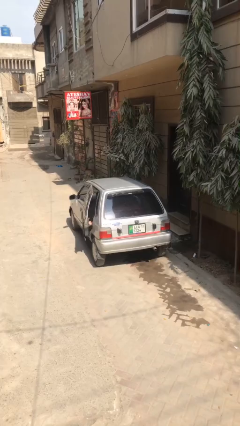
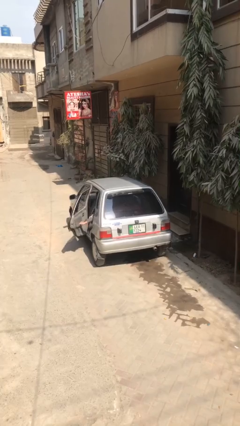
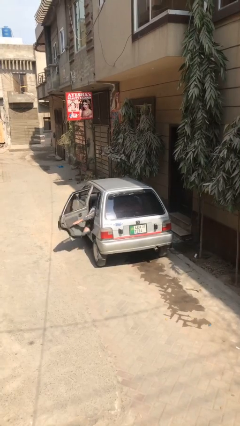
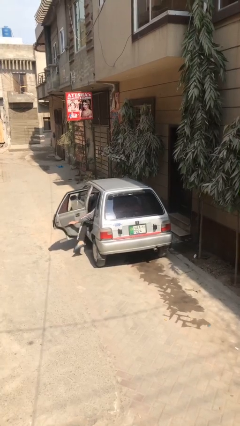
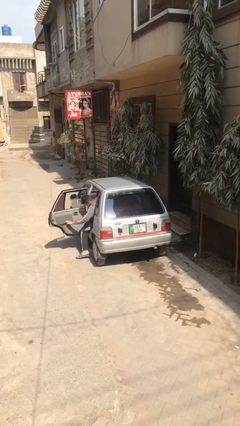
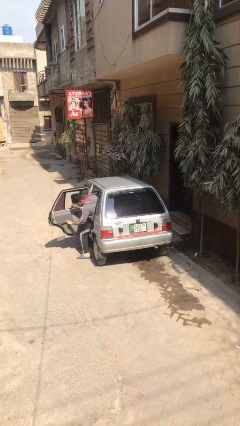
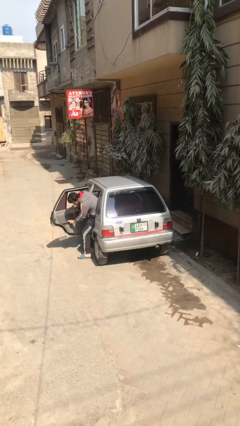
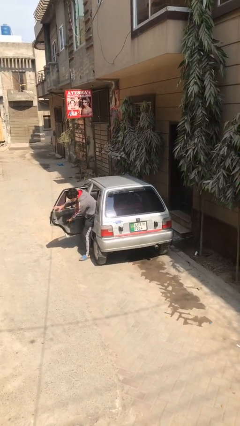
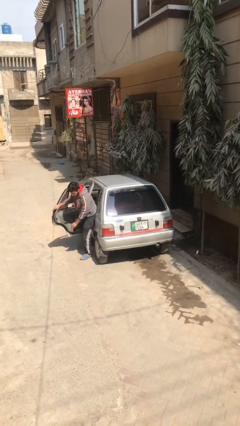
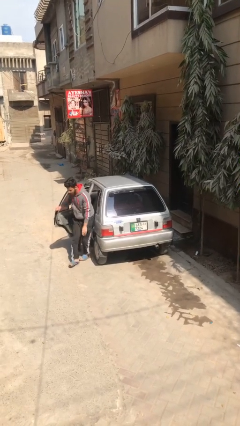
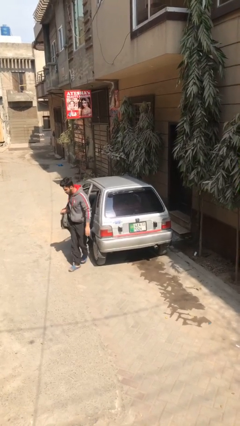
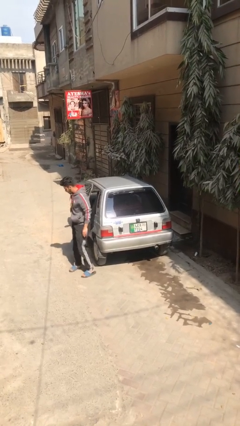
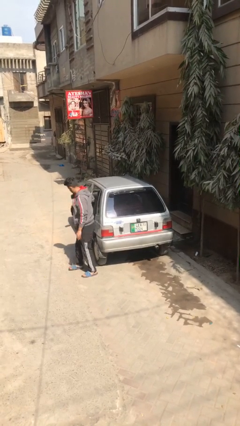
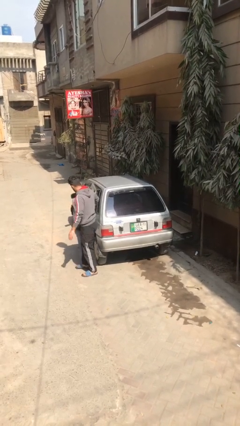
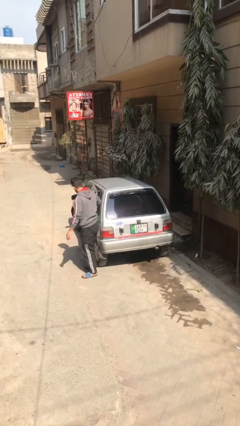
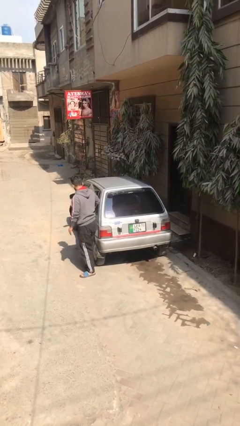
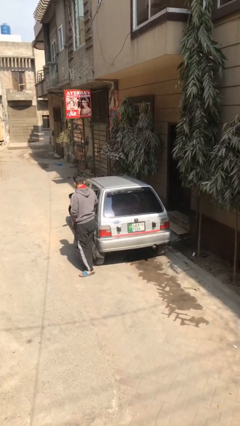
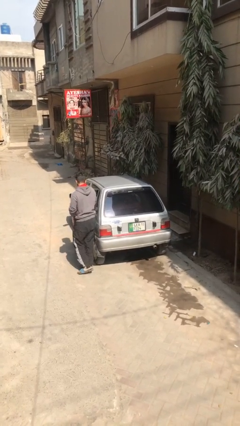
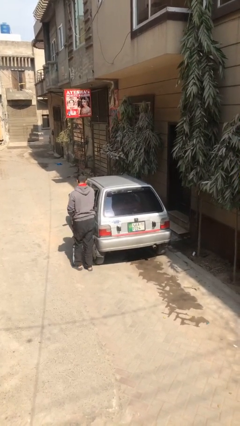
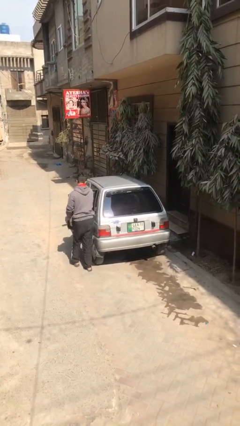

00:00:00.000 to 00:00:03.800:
car drops off person

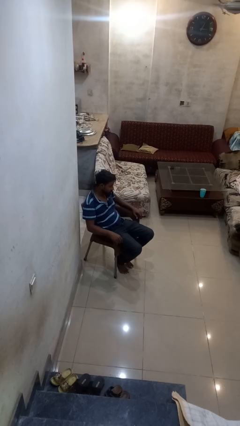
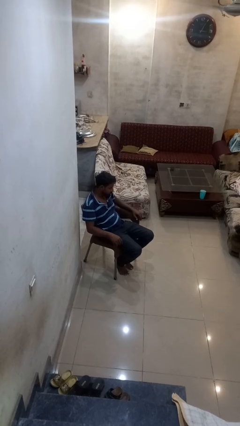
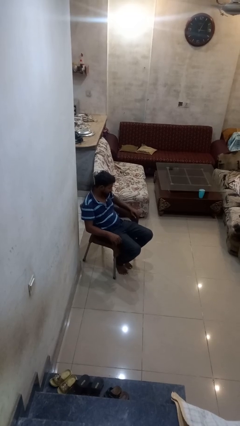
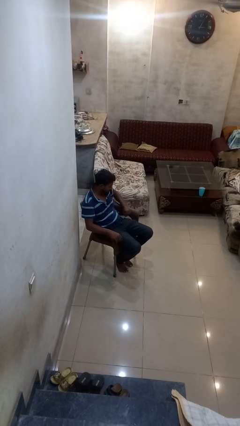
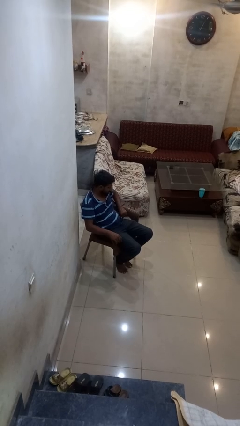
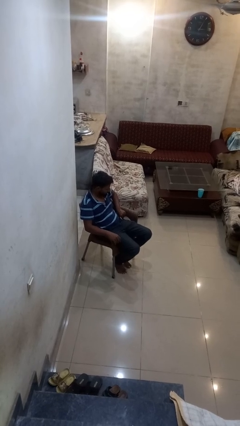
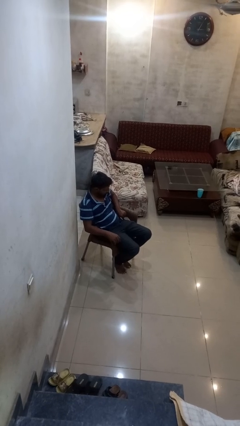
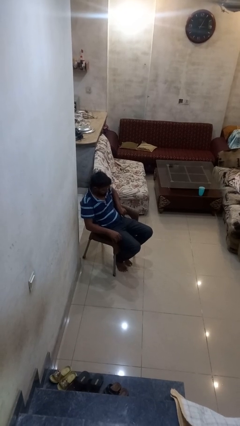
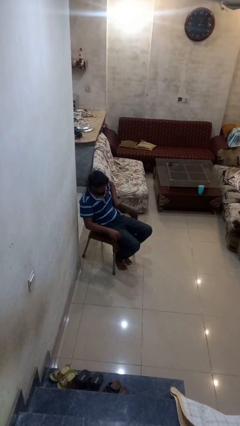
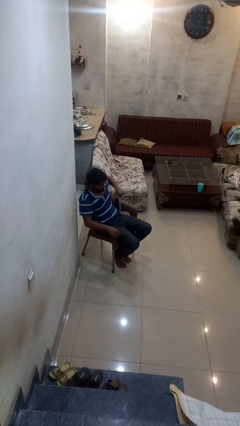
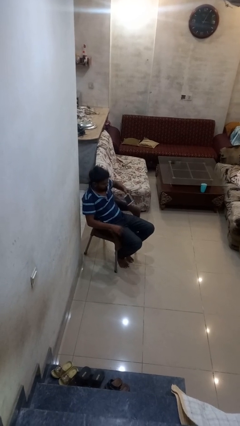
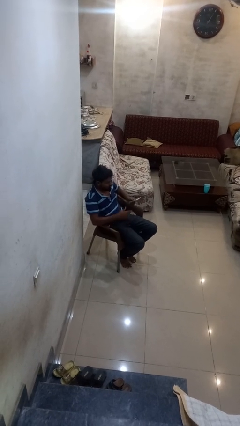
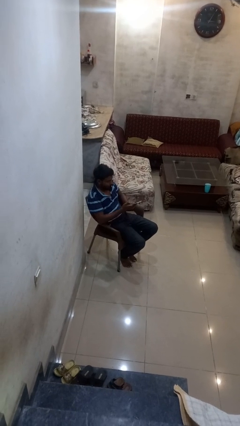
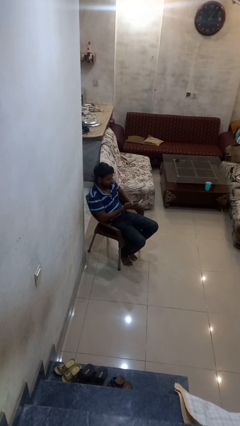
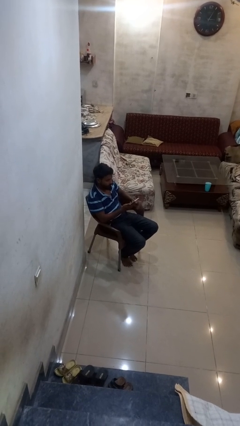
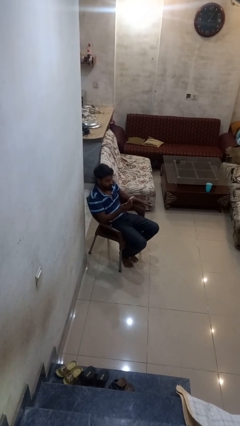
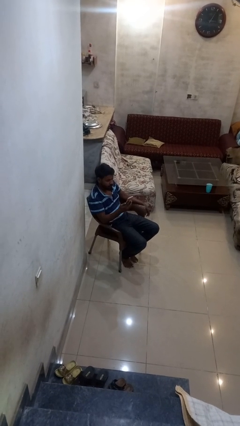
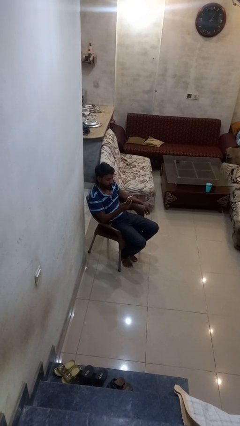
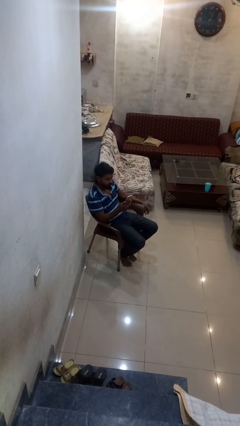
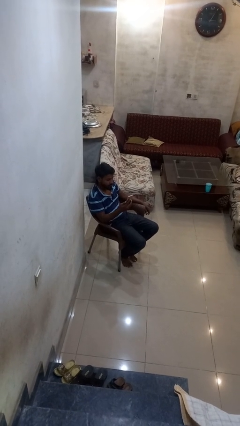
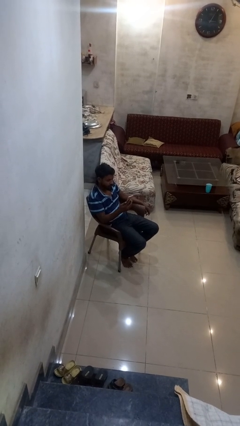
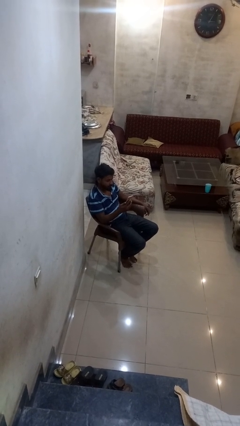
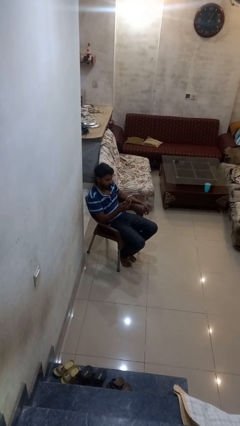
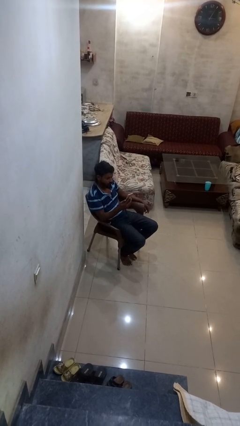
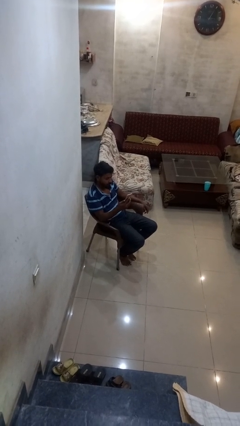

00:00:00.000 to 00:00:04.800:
person takes phone from pocket

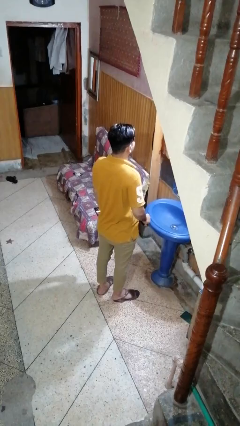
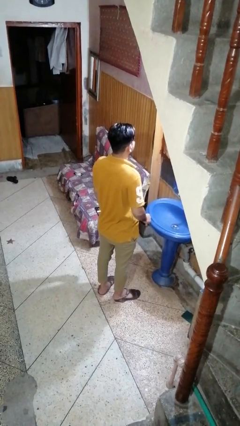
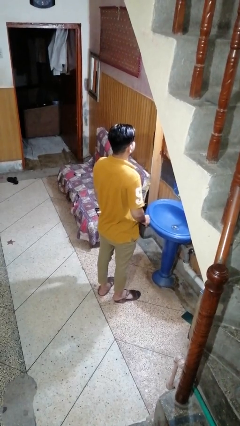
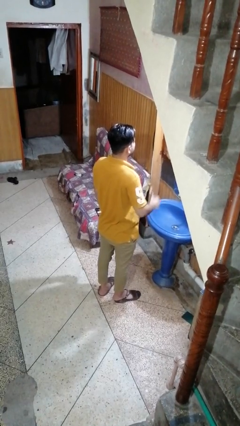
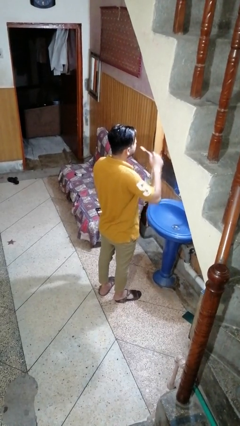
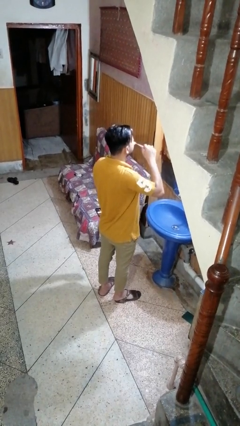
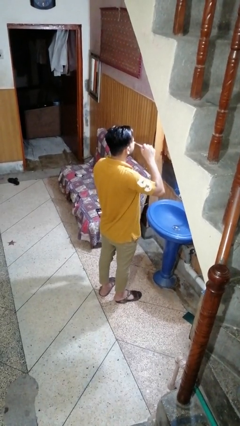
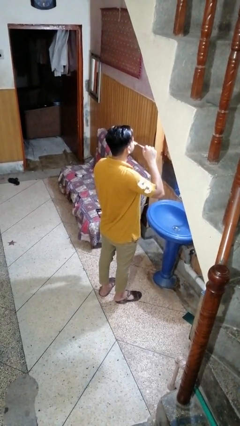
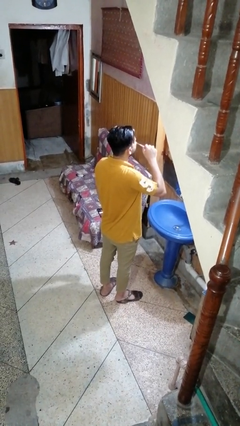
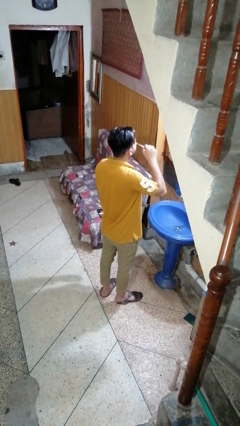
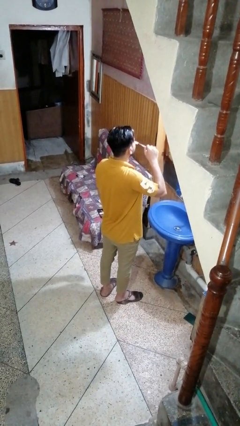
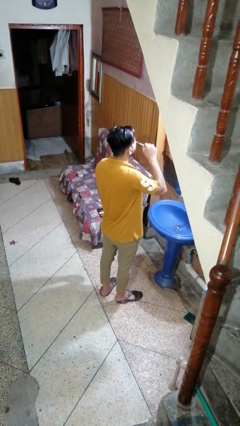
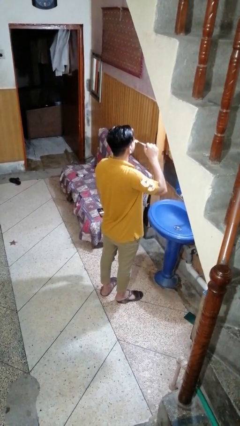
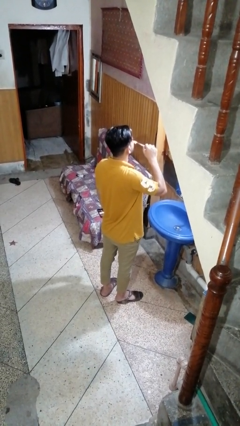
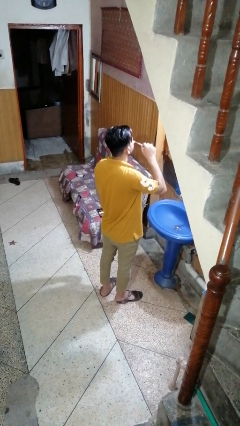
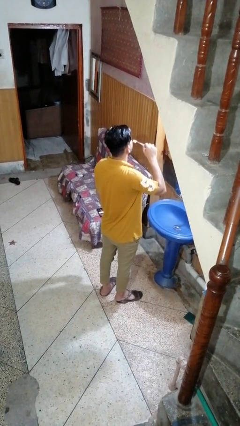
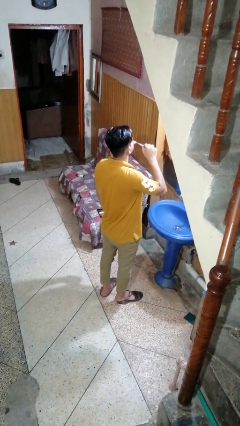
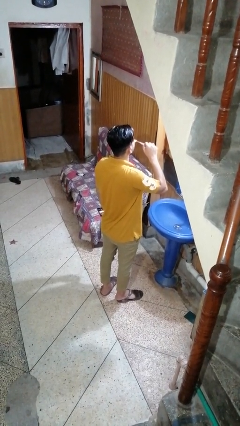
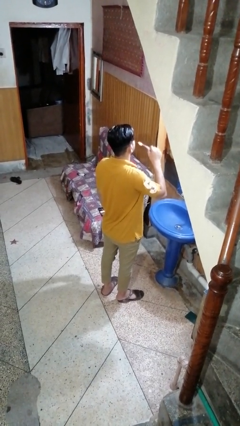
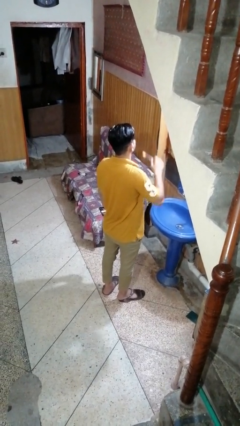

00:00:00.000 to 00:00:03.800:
person brushes teeth

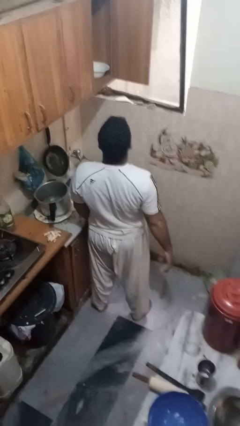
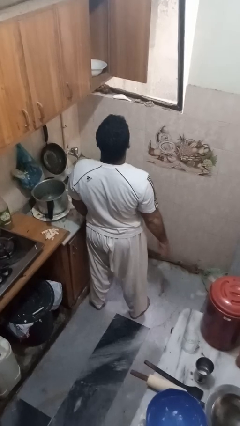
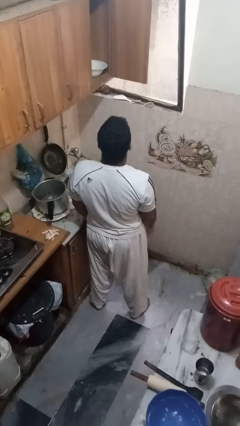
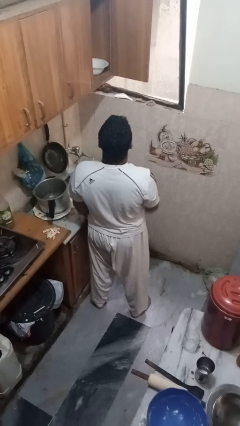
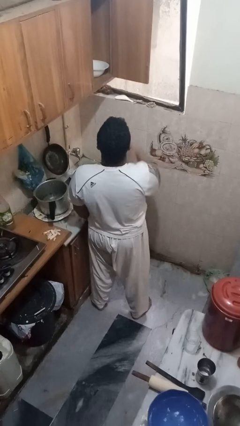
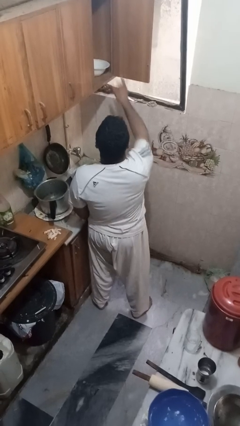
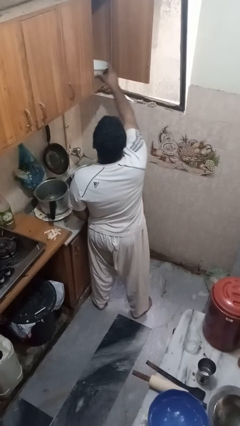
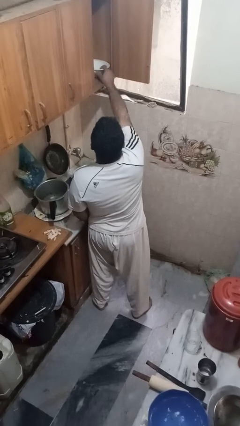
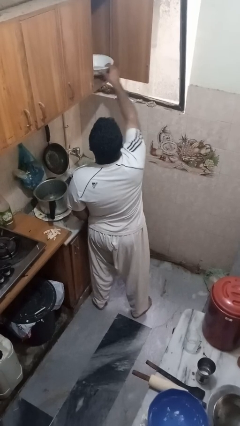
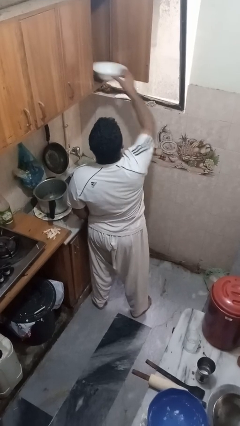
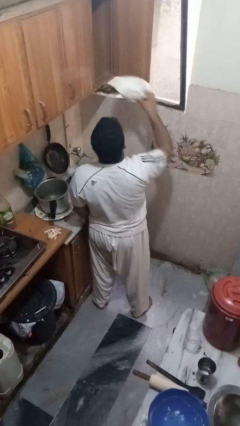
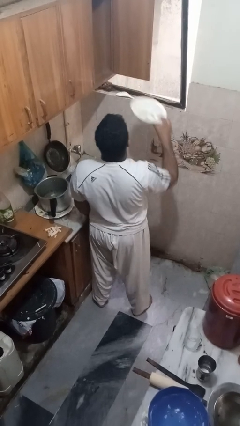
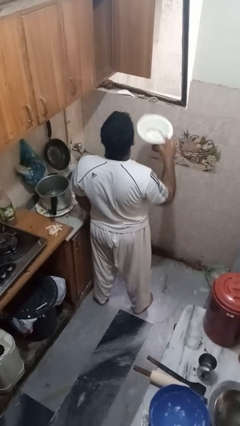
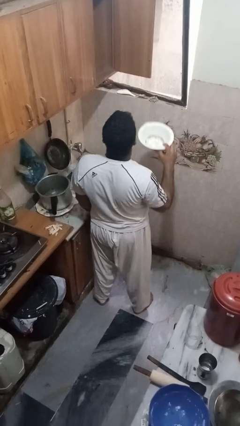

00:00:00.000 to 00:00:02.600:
person takes object from cabinet

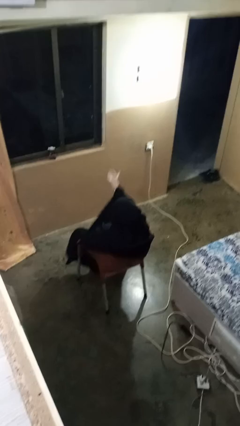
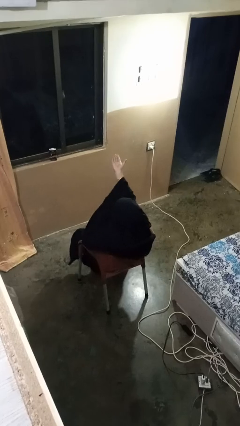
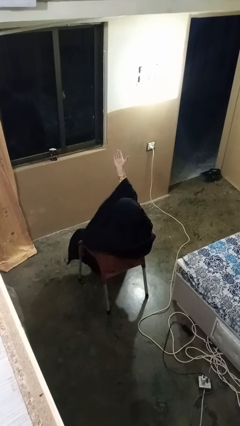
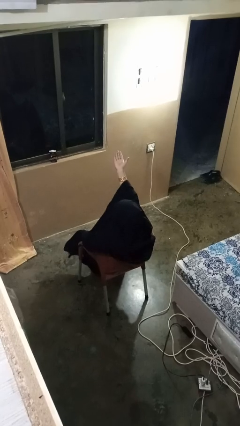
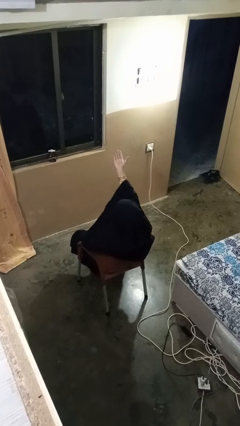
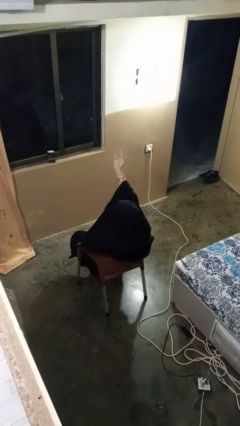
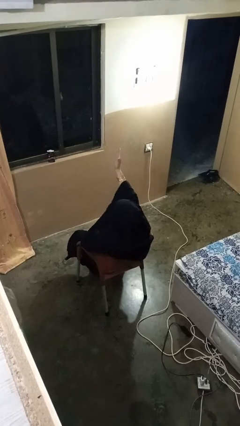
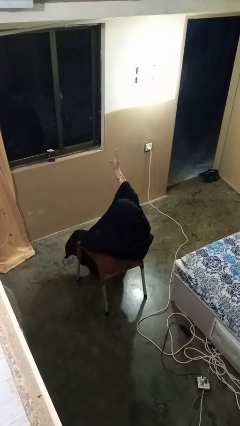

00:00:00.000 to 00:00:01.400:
person gestures swipe up

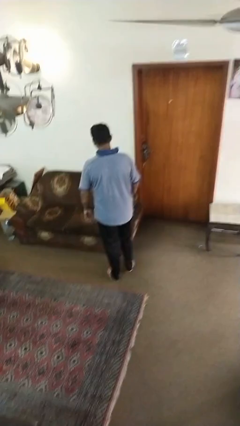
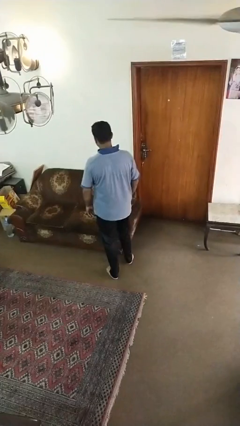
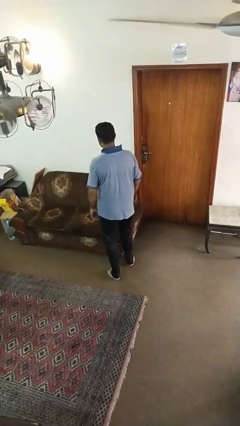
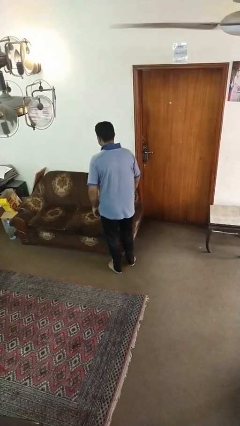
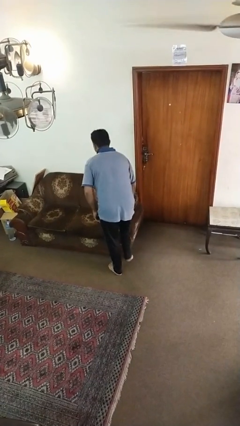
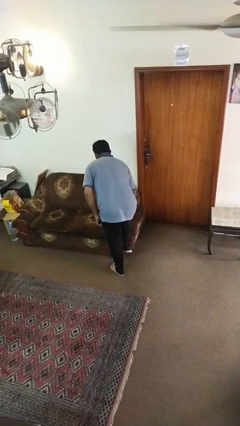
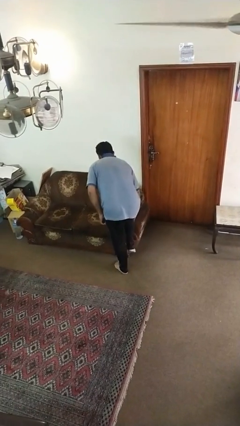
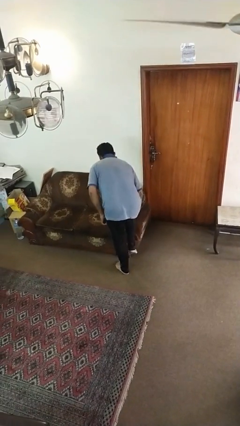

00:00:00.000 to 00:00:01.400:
person stubs toe
